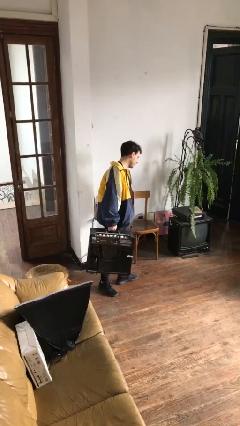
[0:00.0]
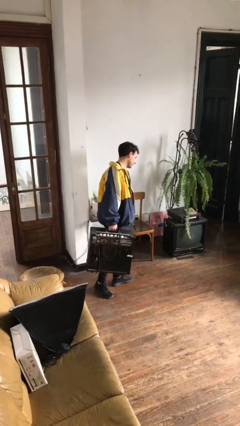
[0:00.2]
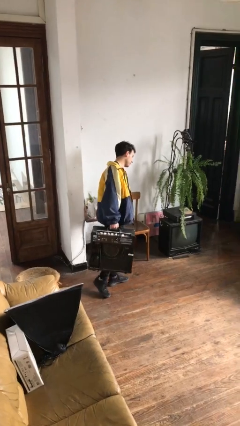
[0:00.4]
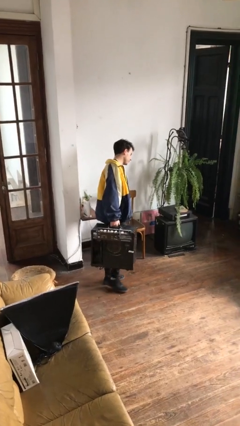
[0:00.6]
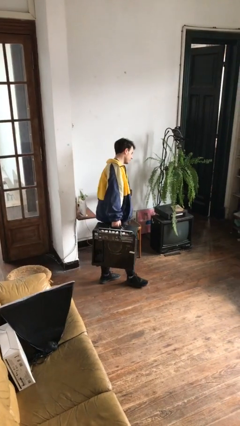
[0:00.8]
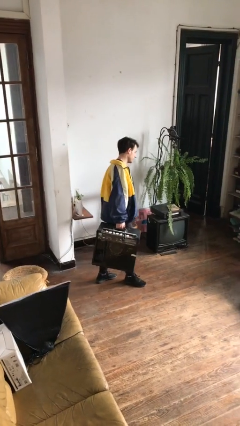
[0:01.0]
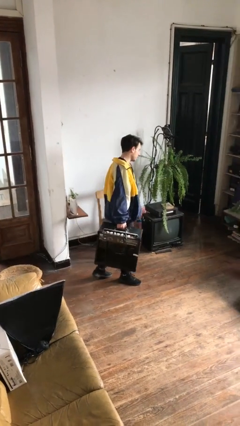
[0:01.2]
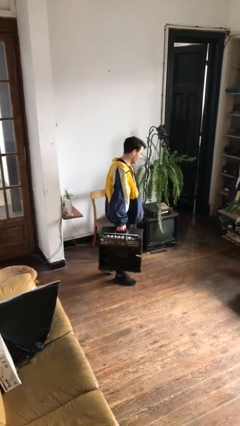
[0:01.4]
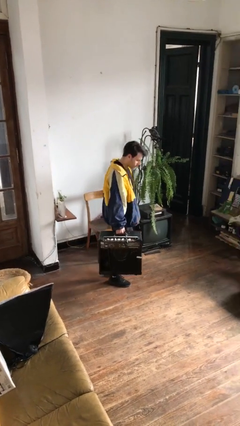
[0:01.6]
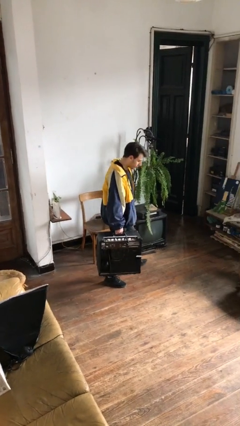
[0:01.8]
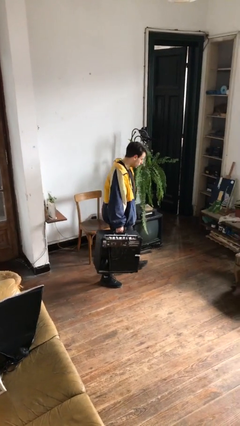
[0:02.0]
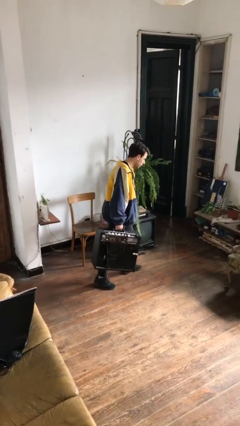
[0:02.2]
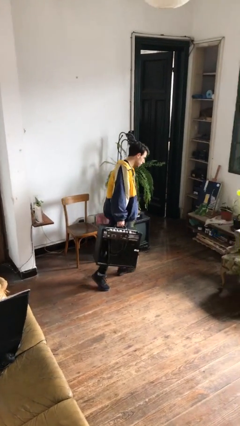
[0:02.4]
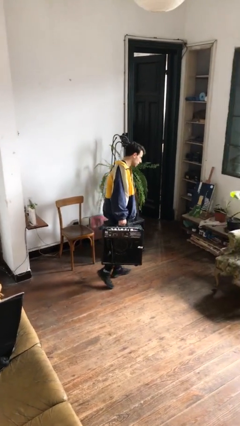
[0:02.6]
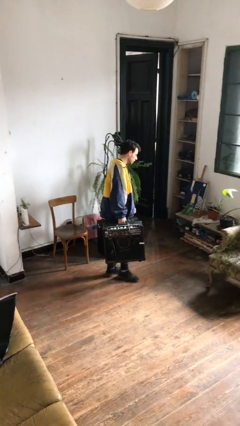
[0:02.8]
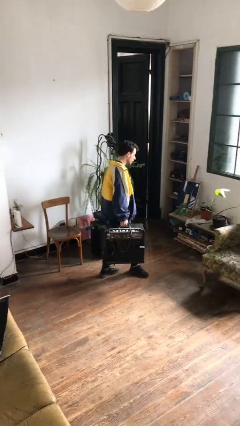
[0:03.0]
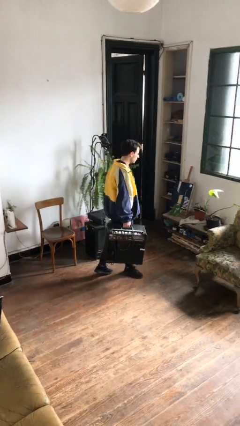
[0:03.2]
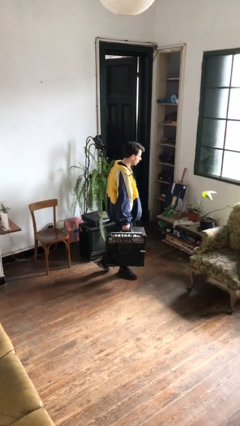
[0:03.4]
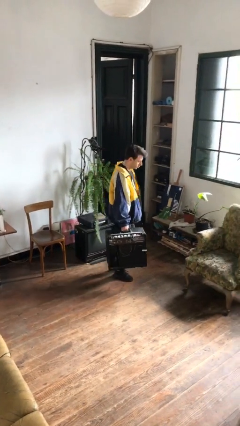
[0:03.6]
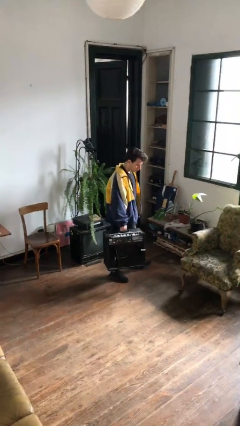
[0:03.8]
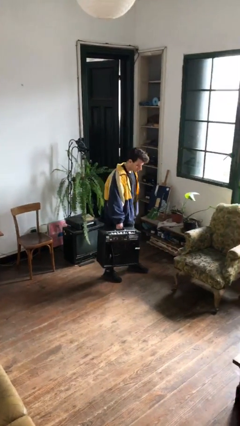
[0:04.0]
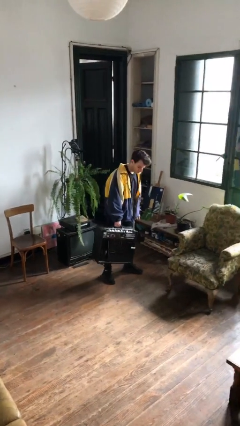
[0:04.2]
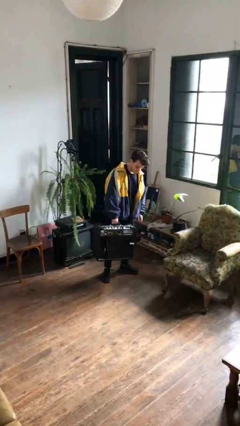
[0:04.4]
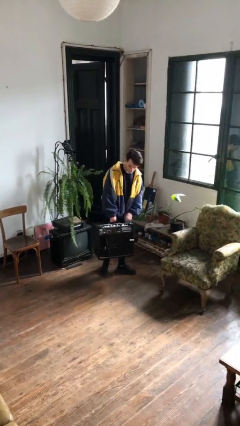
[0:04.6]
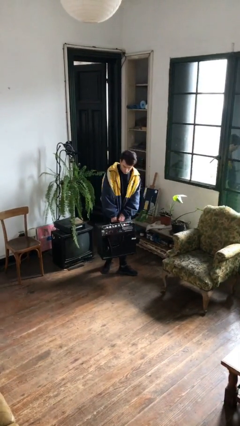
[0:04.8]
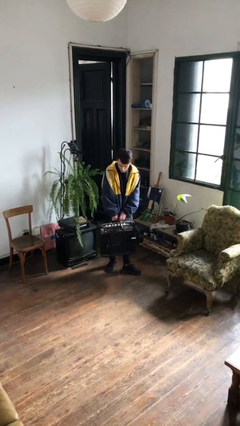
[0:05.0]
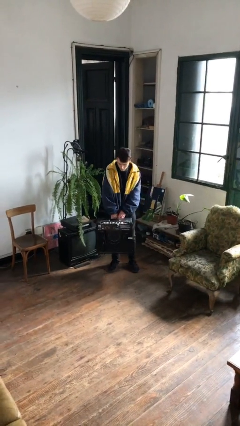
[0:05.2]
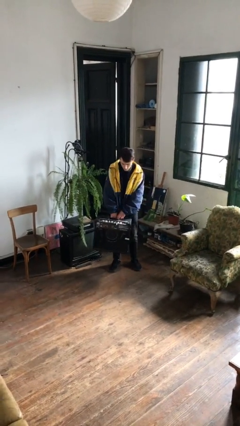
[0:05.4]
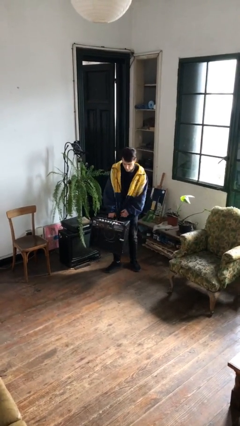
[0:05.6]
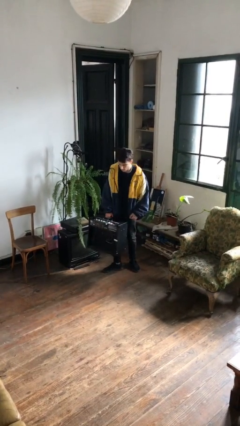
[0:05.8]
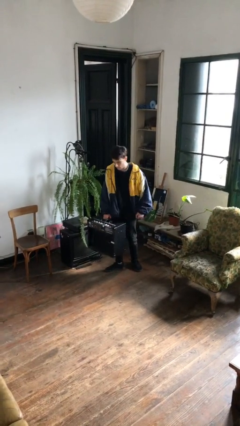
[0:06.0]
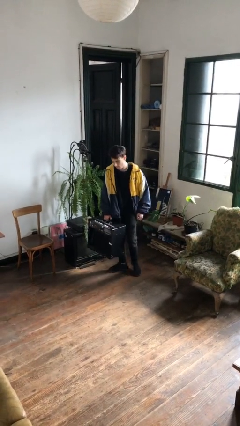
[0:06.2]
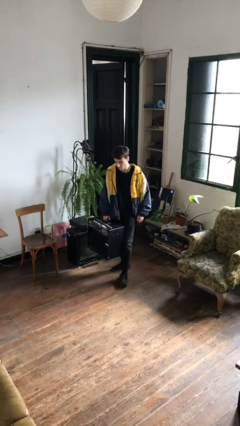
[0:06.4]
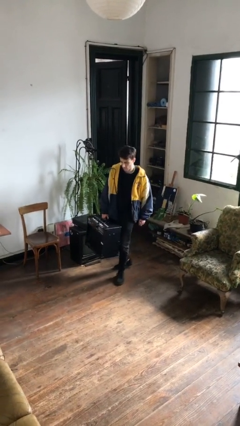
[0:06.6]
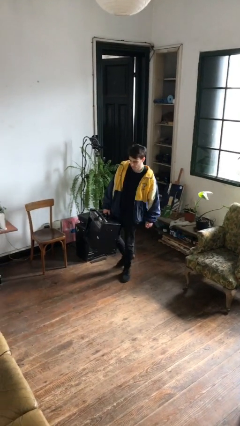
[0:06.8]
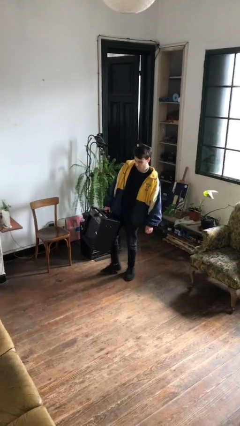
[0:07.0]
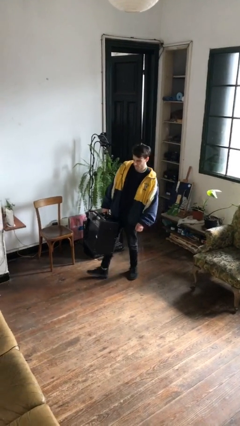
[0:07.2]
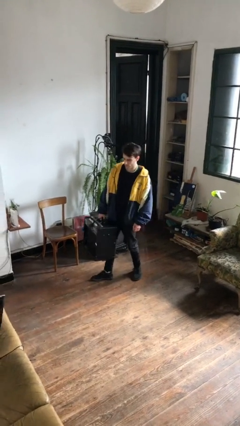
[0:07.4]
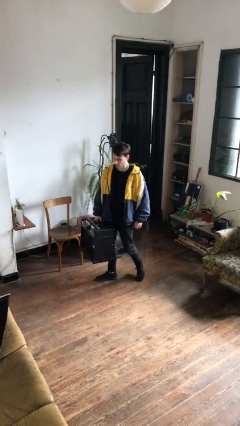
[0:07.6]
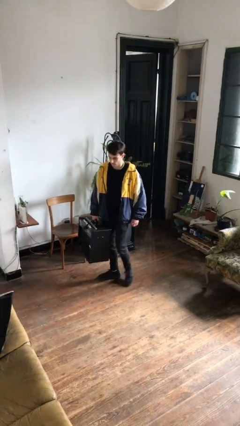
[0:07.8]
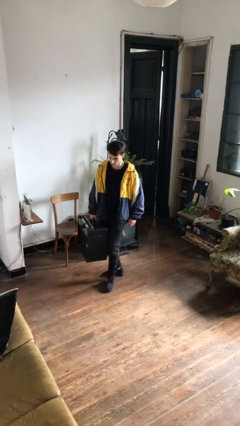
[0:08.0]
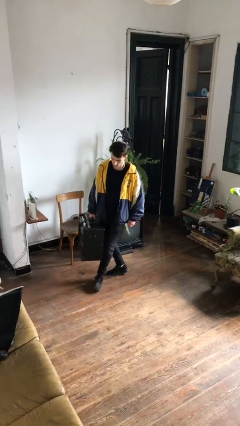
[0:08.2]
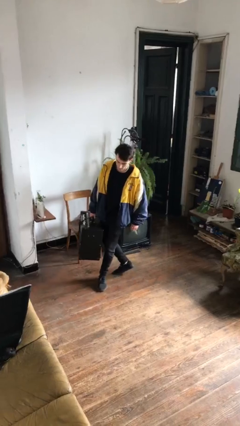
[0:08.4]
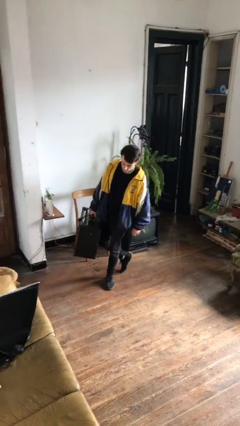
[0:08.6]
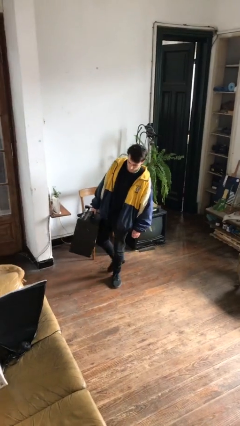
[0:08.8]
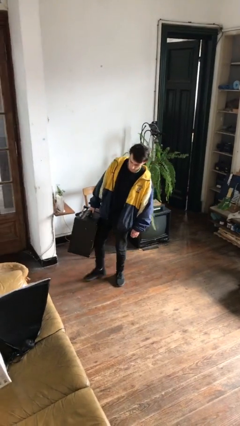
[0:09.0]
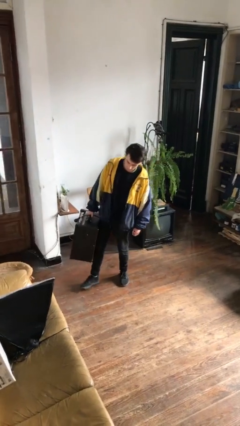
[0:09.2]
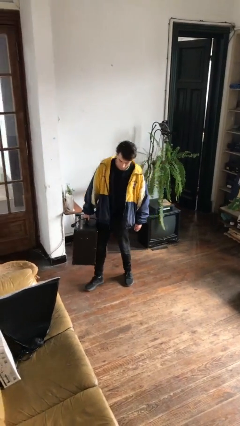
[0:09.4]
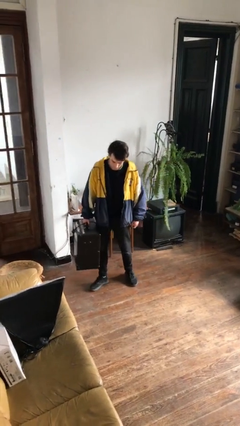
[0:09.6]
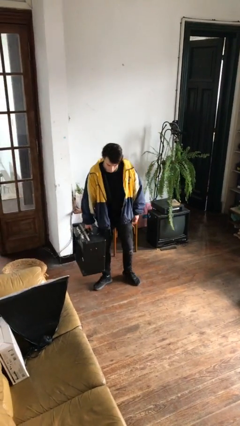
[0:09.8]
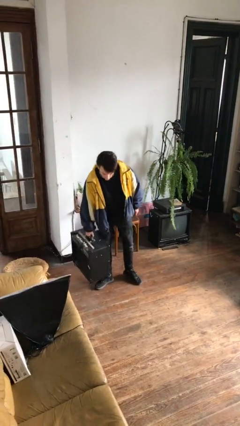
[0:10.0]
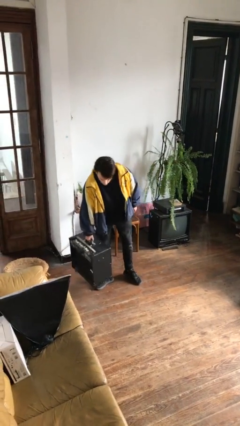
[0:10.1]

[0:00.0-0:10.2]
person carries heavy object

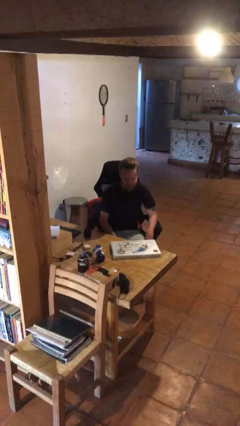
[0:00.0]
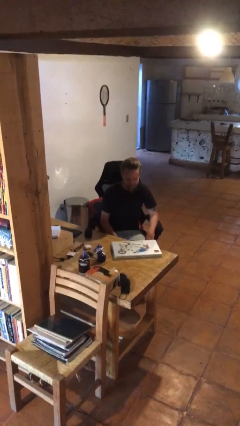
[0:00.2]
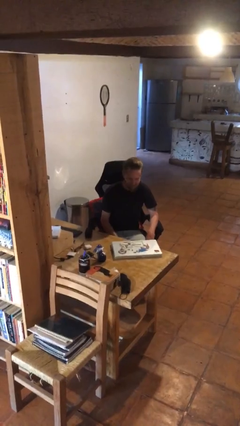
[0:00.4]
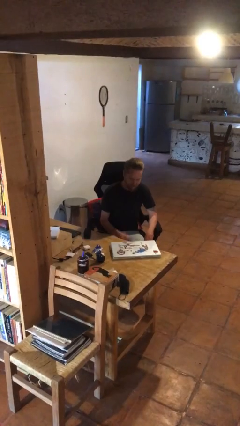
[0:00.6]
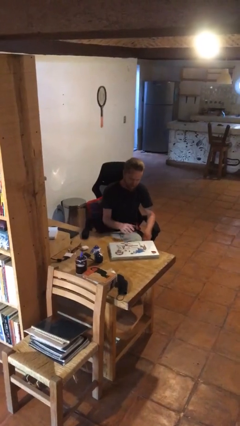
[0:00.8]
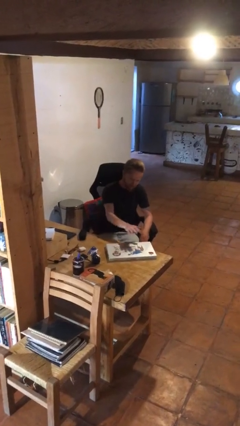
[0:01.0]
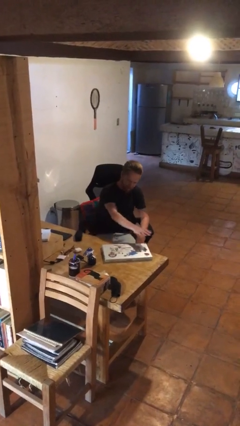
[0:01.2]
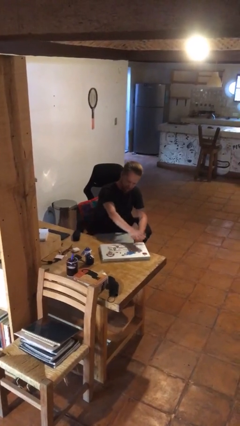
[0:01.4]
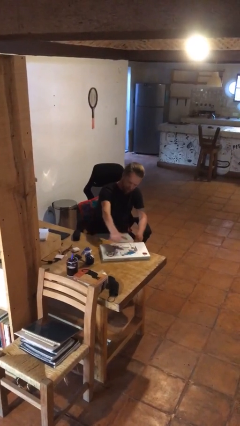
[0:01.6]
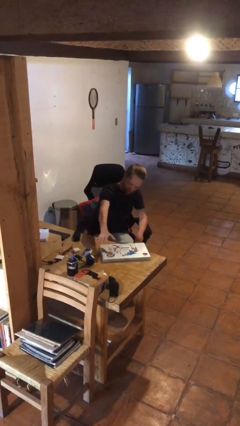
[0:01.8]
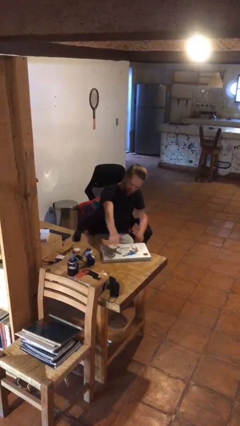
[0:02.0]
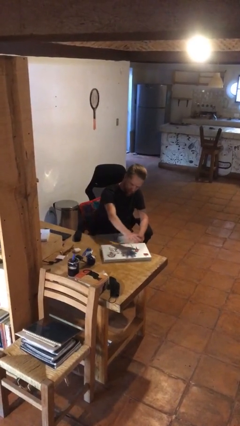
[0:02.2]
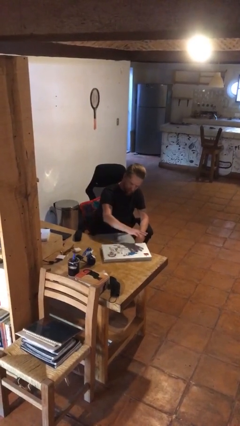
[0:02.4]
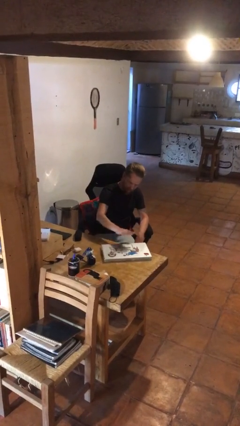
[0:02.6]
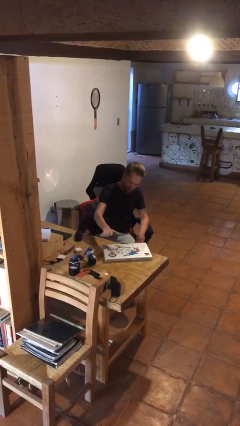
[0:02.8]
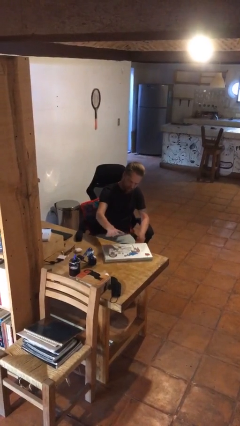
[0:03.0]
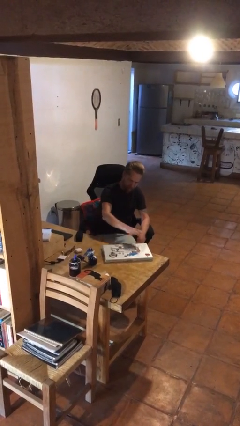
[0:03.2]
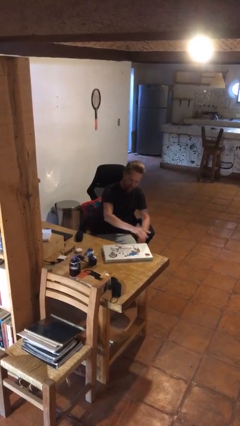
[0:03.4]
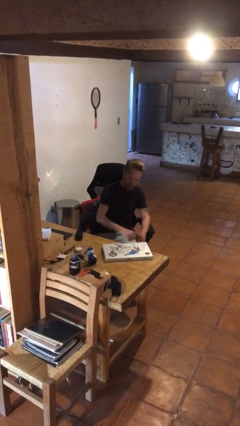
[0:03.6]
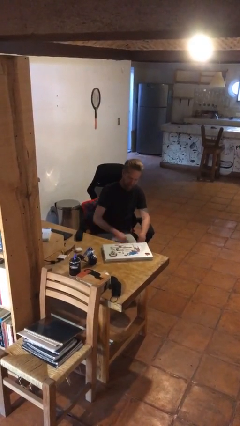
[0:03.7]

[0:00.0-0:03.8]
person waves hand over object

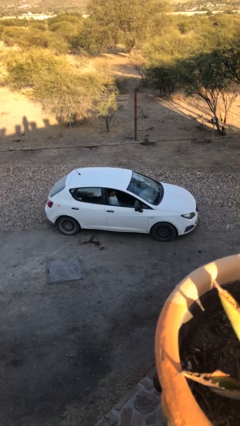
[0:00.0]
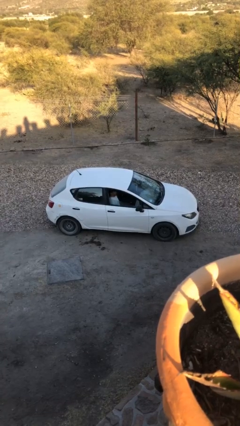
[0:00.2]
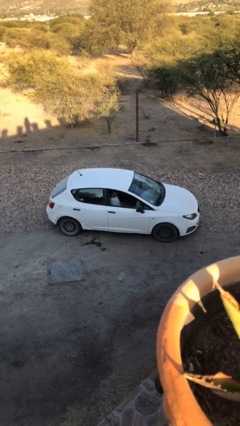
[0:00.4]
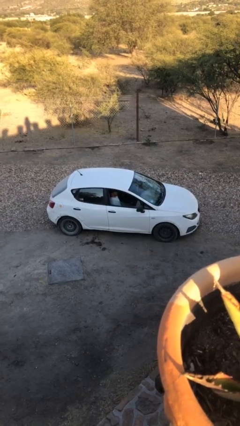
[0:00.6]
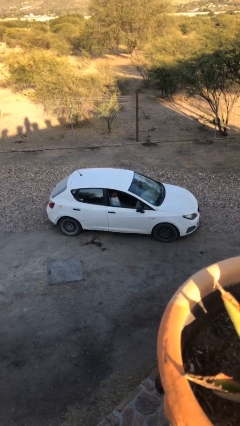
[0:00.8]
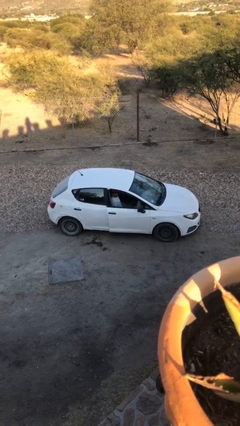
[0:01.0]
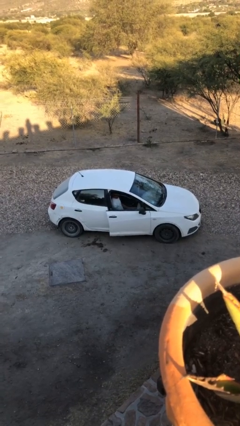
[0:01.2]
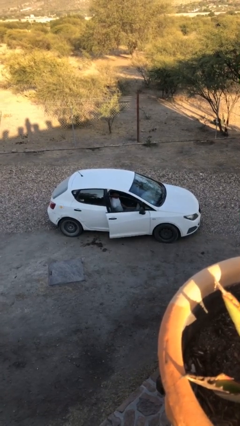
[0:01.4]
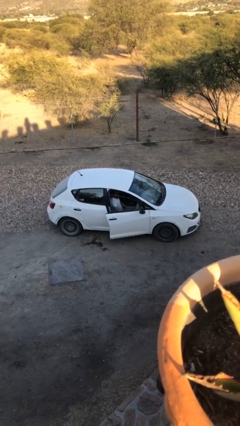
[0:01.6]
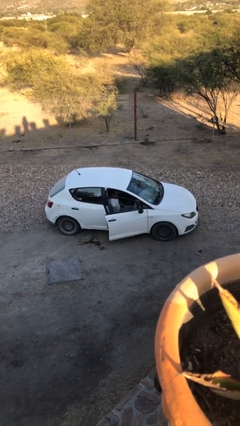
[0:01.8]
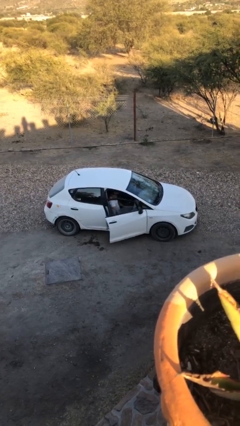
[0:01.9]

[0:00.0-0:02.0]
person opens car door

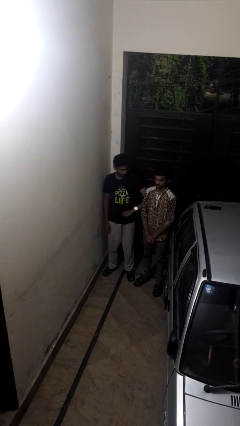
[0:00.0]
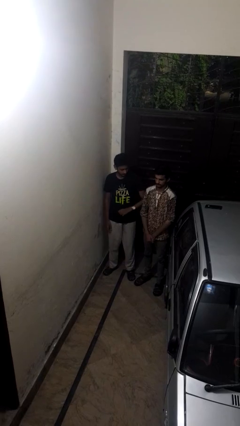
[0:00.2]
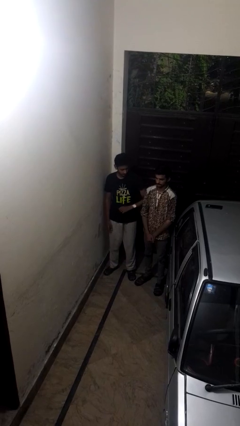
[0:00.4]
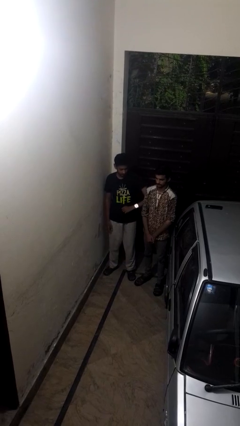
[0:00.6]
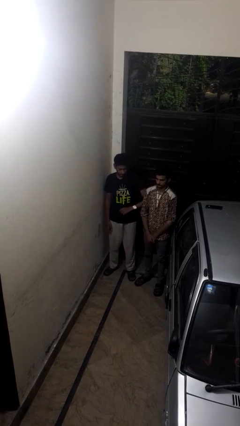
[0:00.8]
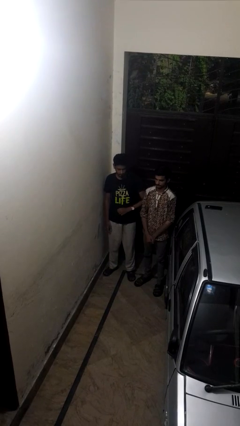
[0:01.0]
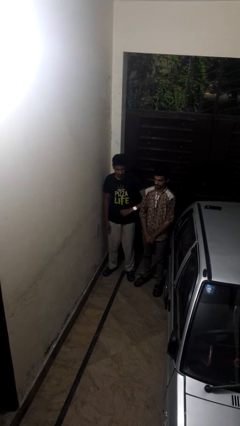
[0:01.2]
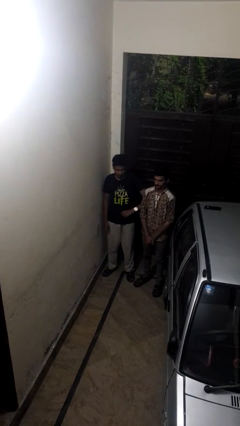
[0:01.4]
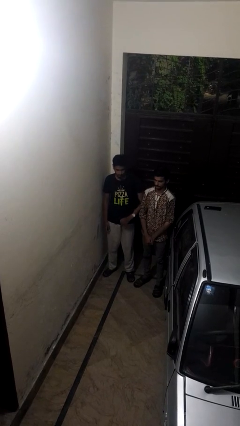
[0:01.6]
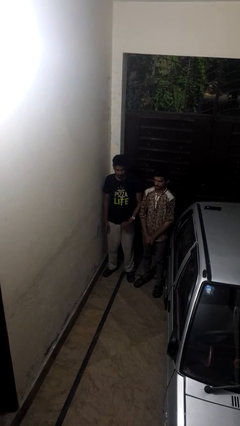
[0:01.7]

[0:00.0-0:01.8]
person nudges person with elbow
